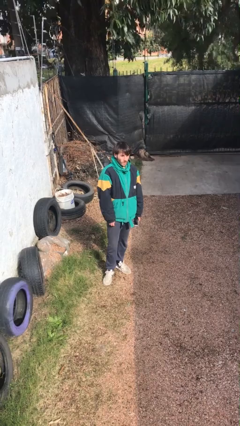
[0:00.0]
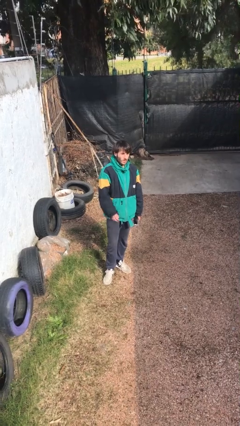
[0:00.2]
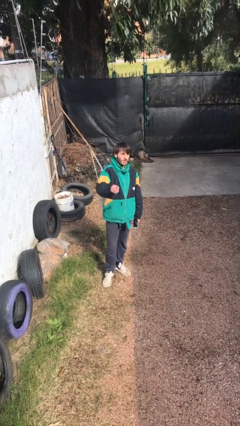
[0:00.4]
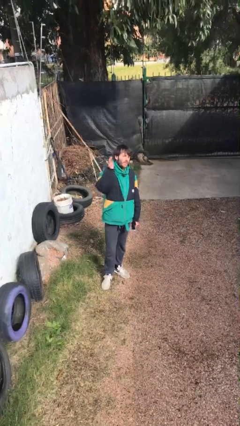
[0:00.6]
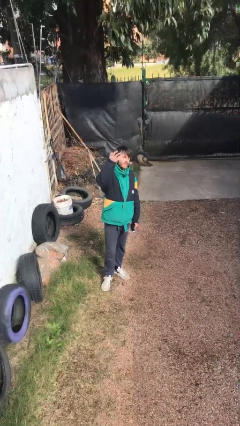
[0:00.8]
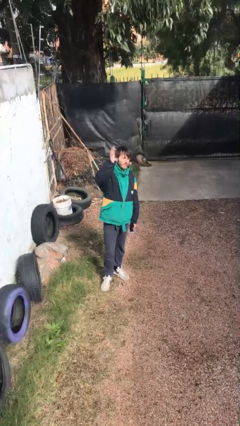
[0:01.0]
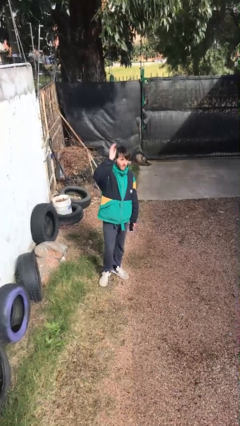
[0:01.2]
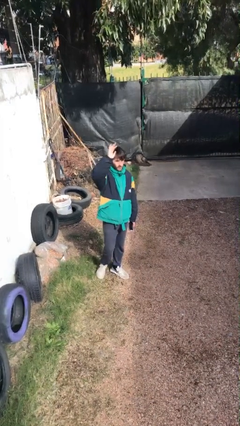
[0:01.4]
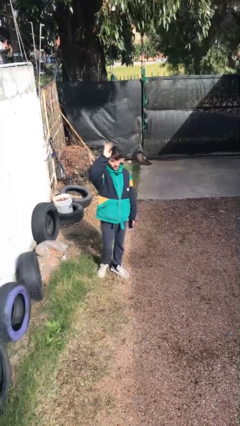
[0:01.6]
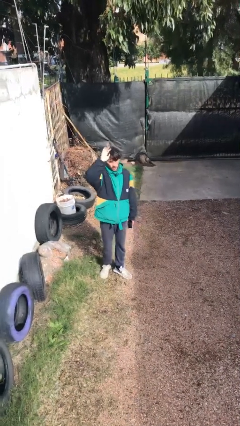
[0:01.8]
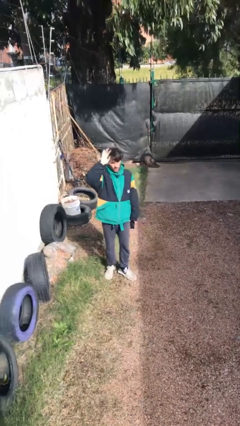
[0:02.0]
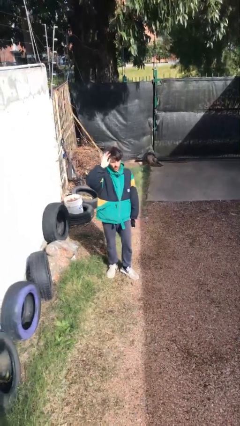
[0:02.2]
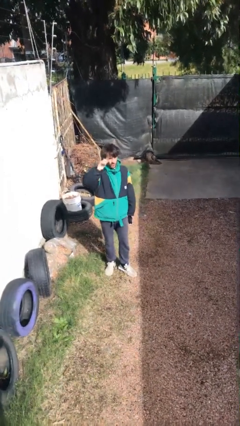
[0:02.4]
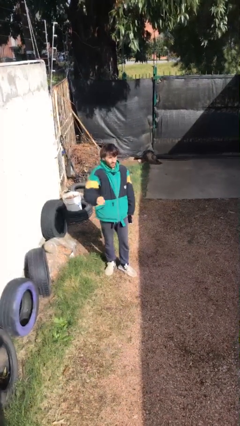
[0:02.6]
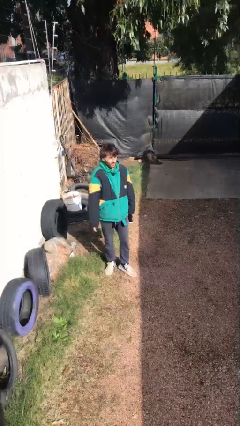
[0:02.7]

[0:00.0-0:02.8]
person waves at person

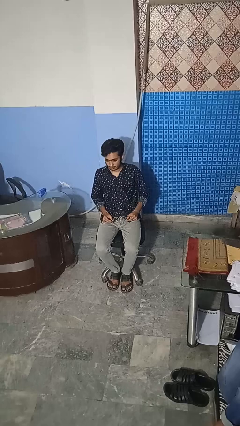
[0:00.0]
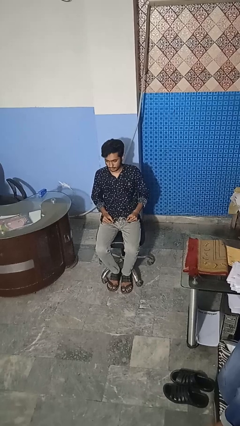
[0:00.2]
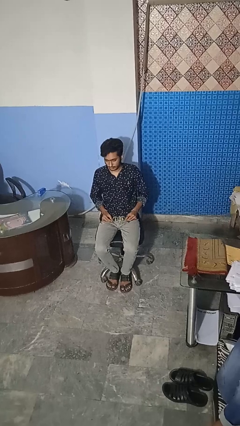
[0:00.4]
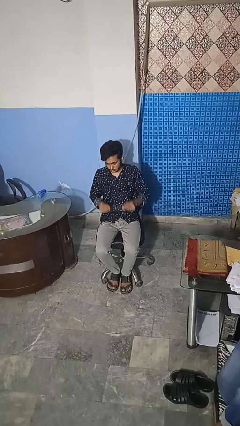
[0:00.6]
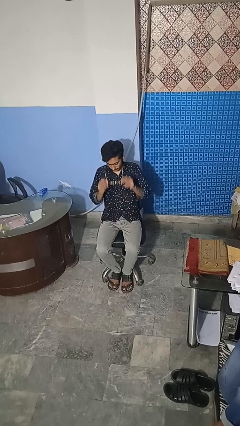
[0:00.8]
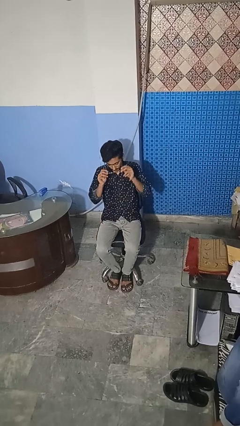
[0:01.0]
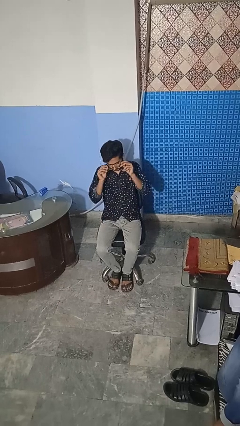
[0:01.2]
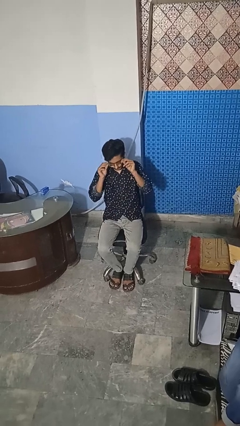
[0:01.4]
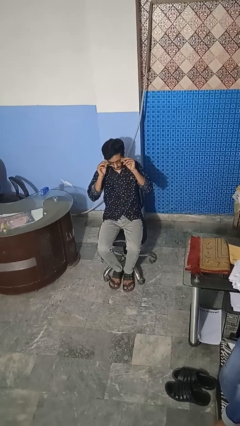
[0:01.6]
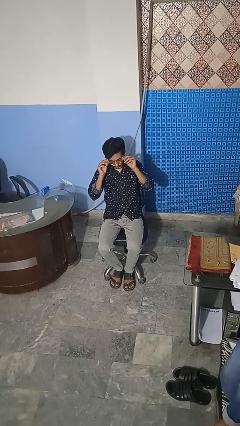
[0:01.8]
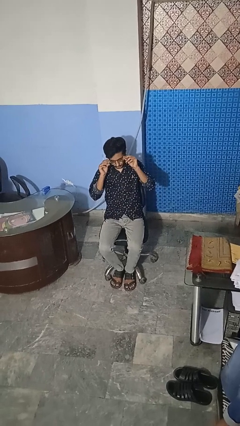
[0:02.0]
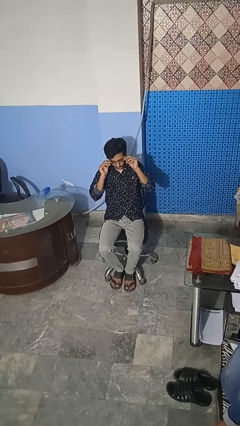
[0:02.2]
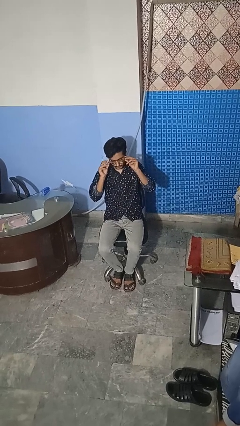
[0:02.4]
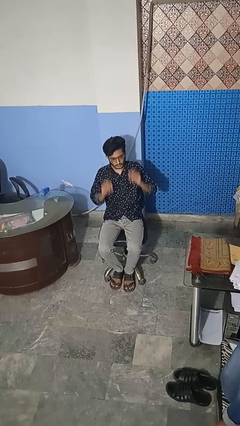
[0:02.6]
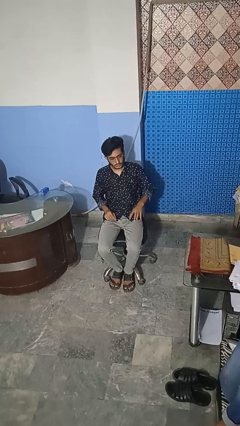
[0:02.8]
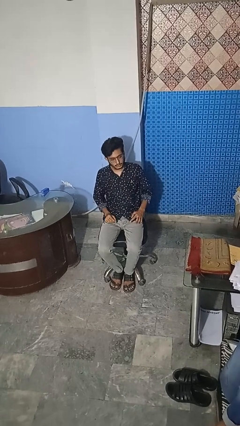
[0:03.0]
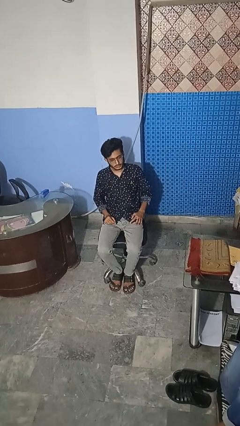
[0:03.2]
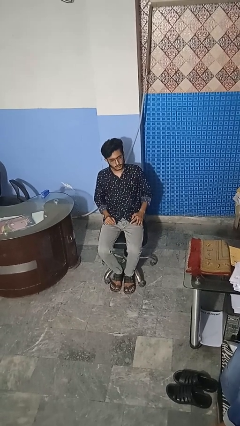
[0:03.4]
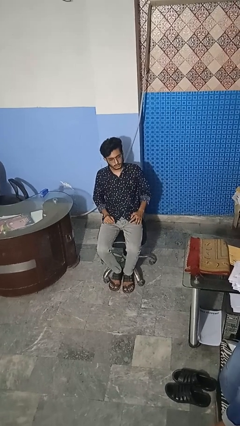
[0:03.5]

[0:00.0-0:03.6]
person puts on glasses

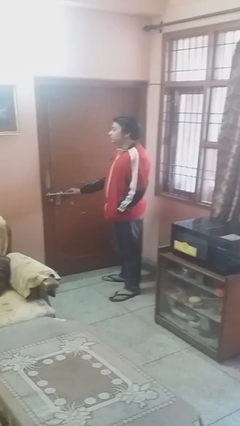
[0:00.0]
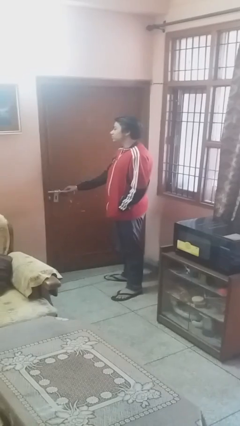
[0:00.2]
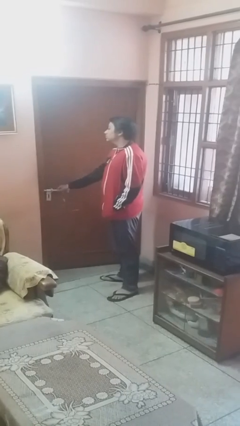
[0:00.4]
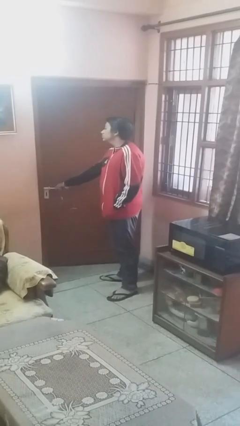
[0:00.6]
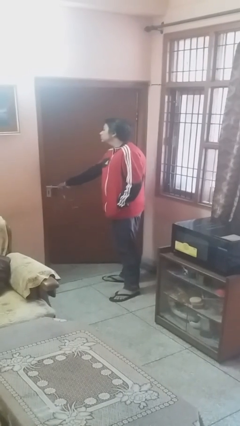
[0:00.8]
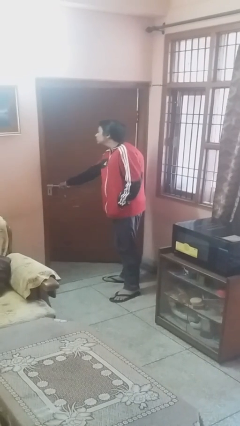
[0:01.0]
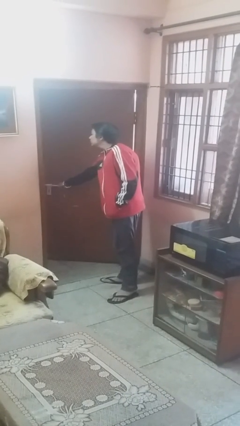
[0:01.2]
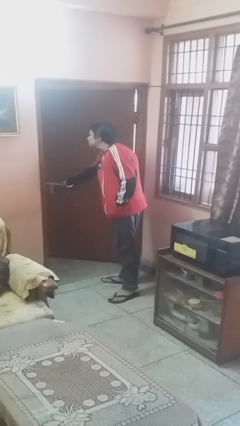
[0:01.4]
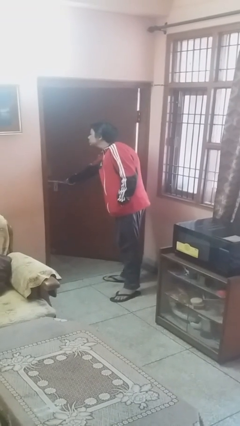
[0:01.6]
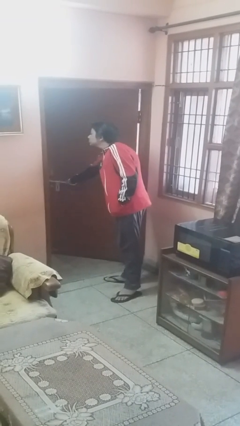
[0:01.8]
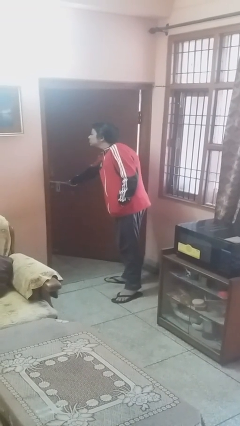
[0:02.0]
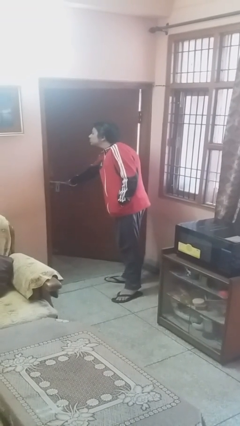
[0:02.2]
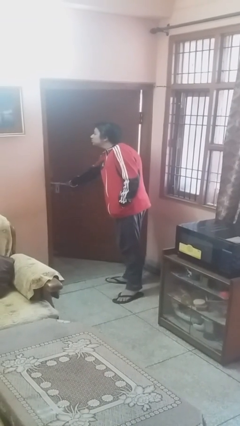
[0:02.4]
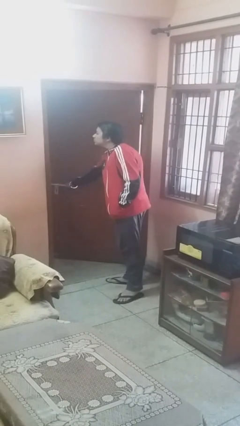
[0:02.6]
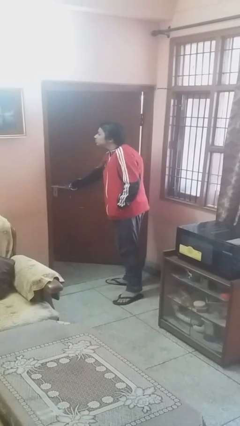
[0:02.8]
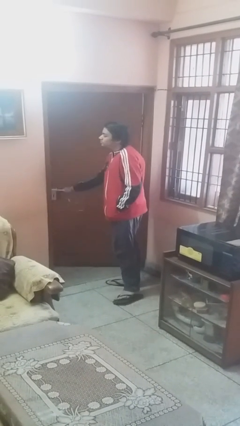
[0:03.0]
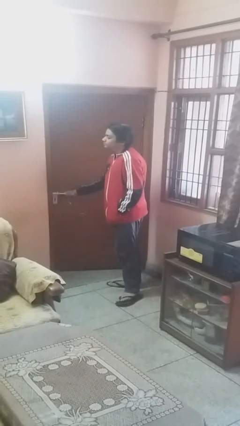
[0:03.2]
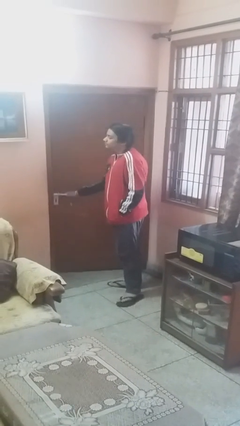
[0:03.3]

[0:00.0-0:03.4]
person opens facility door

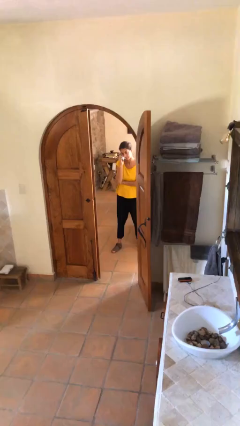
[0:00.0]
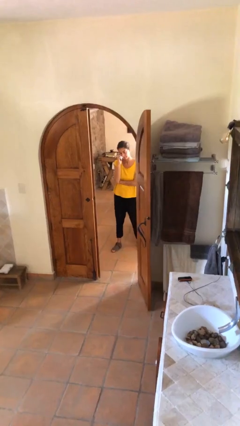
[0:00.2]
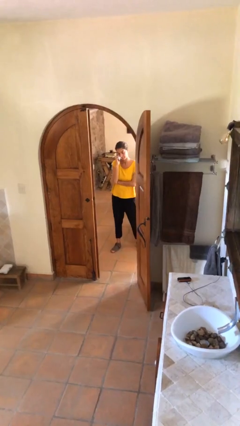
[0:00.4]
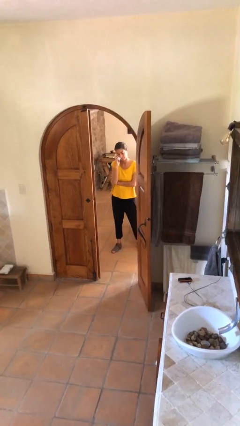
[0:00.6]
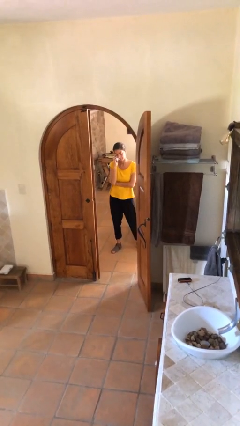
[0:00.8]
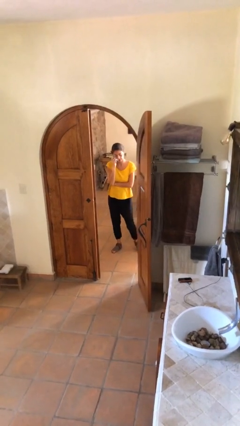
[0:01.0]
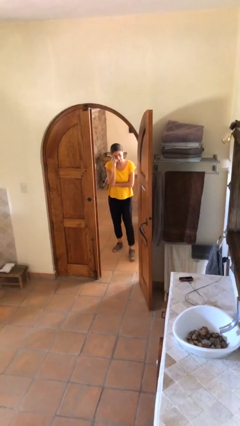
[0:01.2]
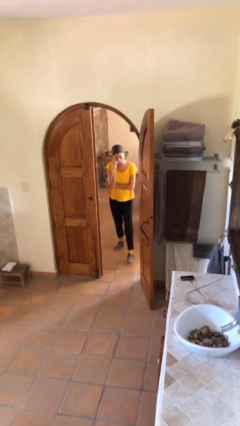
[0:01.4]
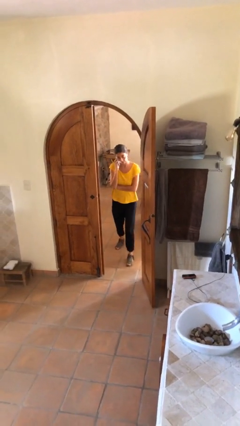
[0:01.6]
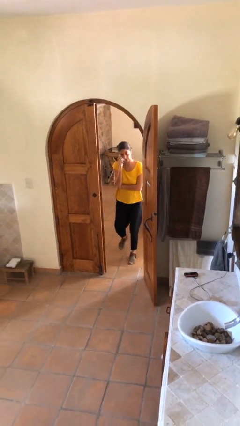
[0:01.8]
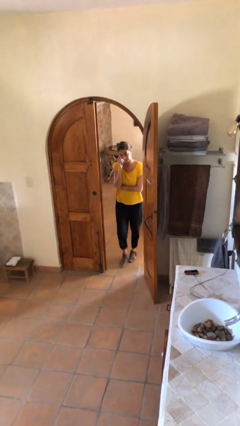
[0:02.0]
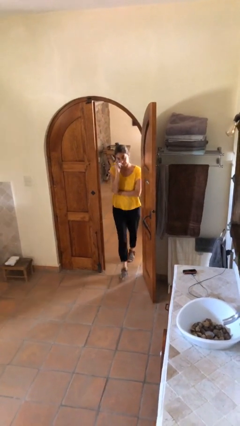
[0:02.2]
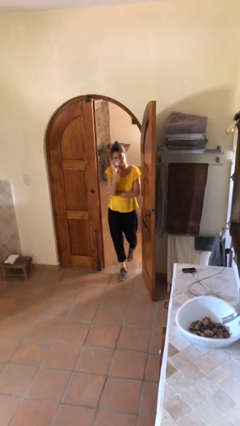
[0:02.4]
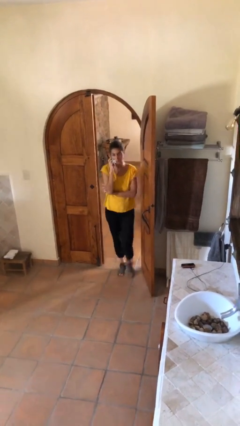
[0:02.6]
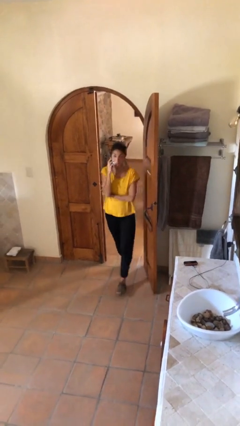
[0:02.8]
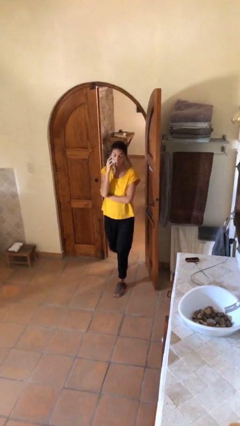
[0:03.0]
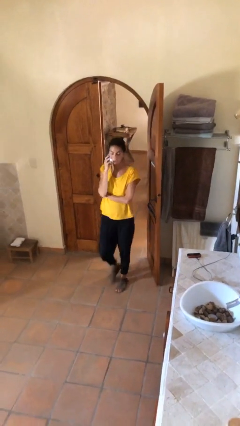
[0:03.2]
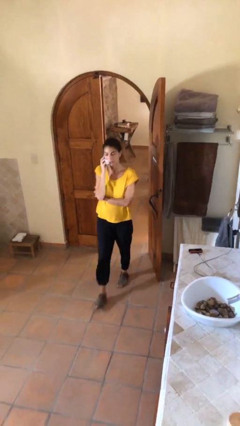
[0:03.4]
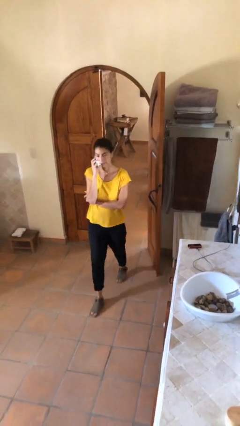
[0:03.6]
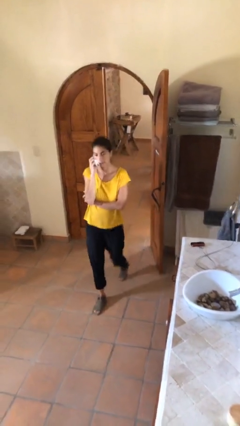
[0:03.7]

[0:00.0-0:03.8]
person enters scene through structure

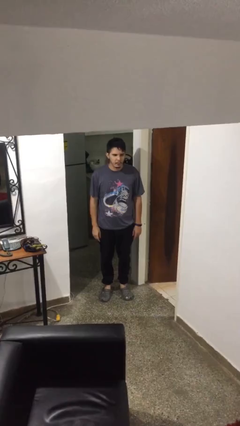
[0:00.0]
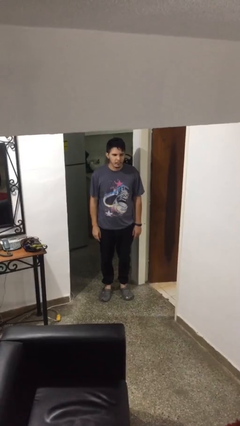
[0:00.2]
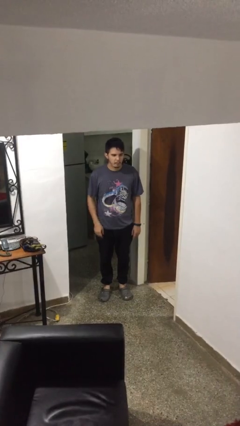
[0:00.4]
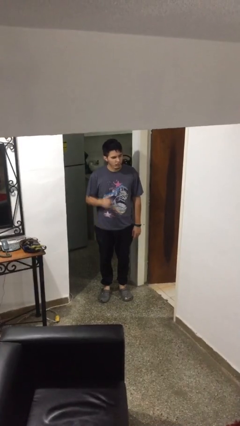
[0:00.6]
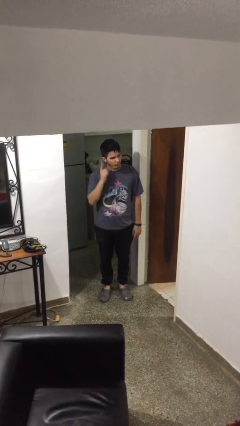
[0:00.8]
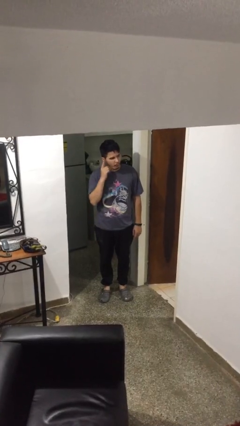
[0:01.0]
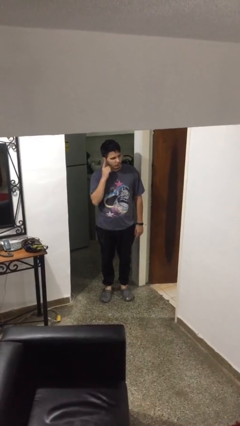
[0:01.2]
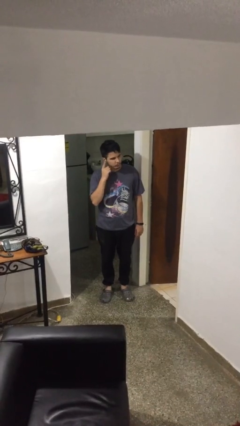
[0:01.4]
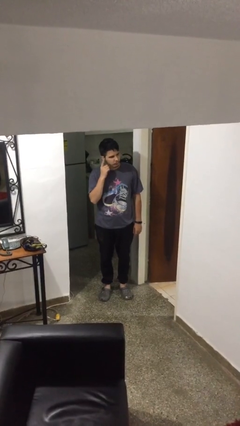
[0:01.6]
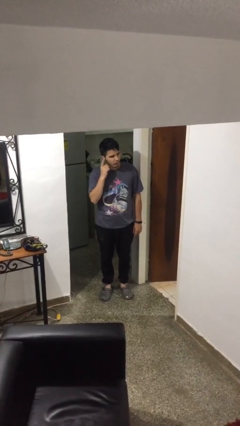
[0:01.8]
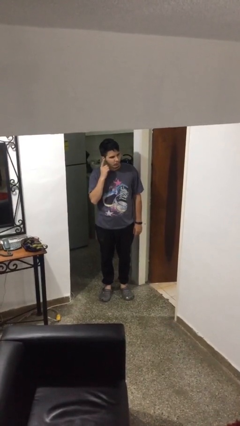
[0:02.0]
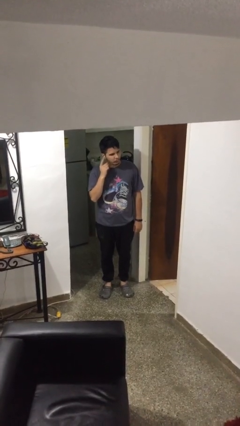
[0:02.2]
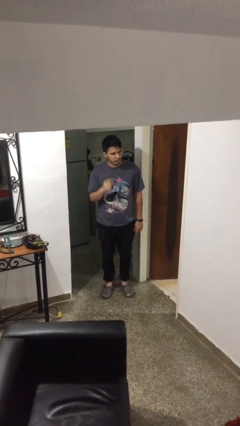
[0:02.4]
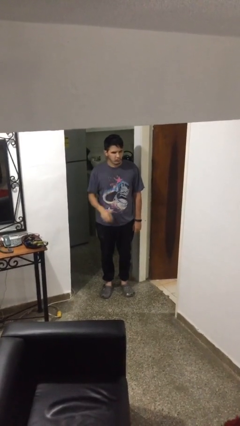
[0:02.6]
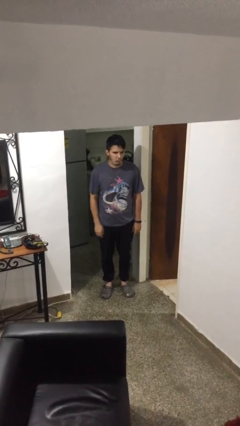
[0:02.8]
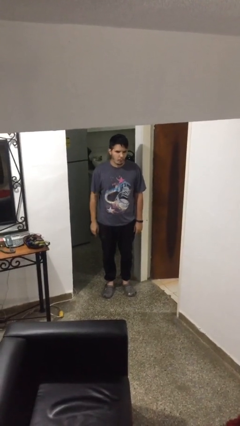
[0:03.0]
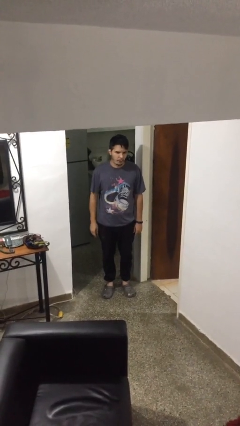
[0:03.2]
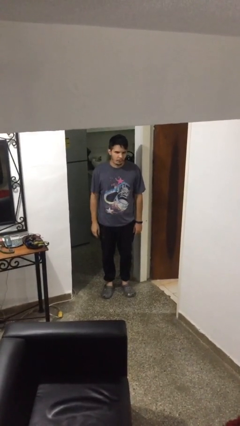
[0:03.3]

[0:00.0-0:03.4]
person gestures listen closely

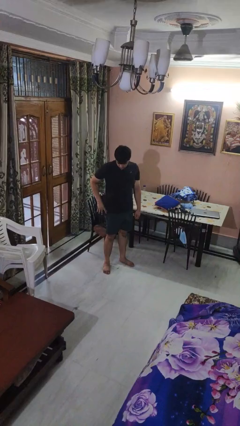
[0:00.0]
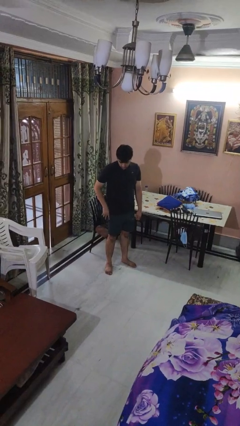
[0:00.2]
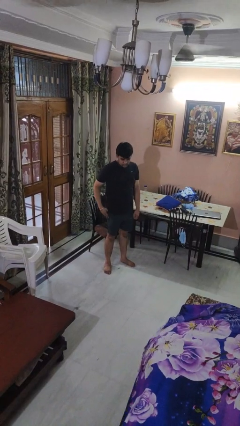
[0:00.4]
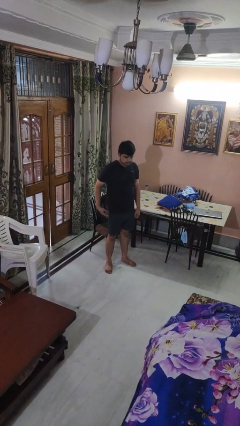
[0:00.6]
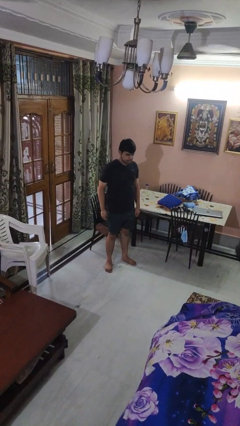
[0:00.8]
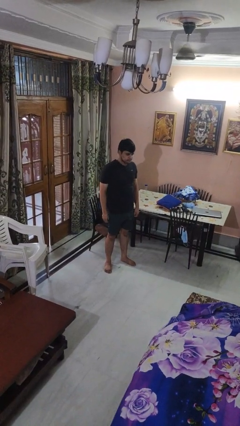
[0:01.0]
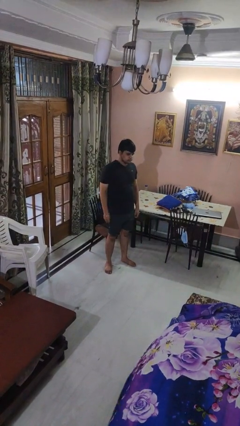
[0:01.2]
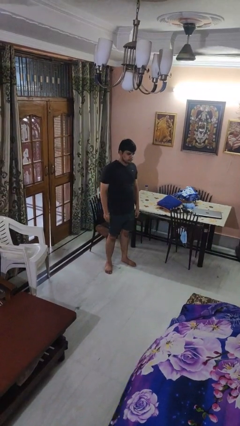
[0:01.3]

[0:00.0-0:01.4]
person puts phone into pocket
